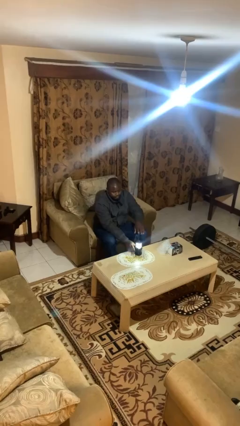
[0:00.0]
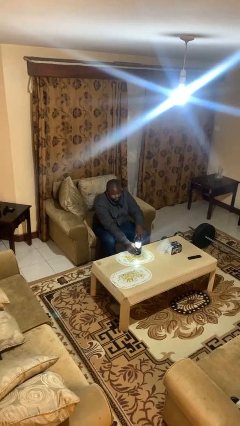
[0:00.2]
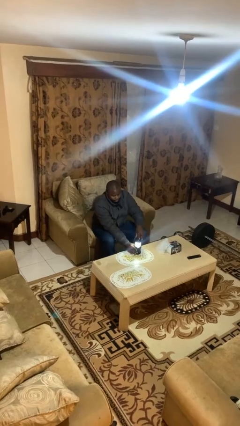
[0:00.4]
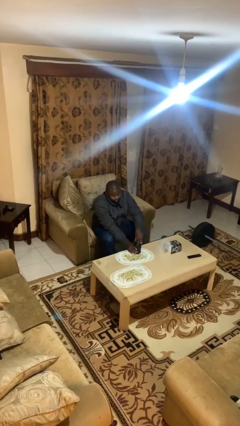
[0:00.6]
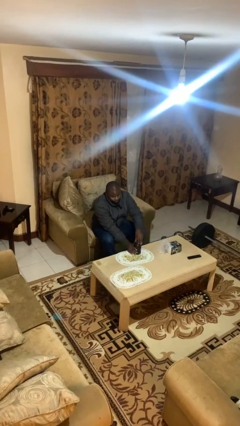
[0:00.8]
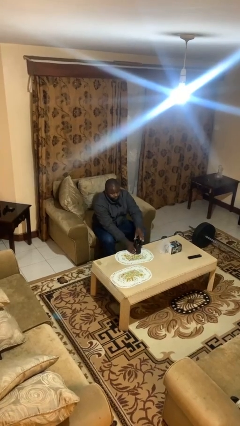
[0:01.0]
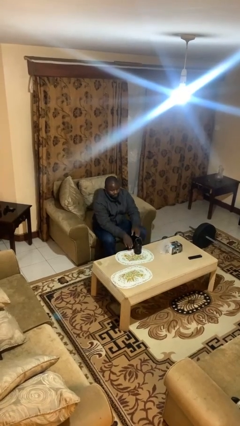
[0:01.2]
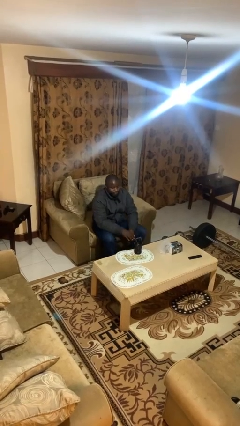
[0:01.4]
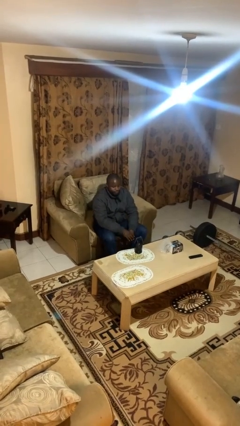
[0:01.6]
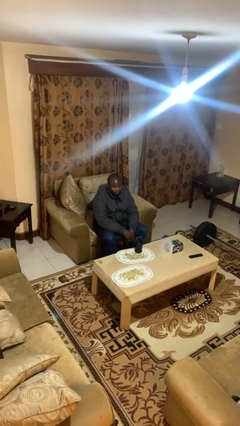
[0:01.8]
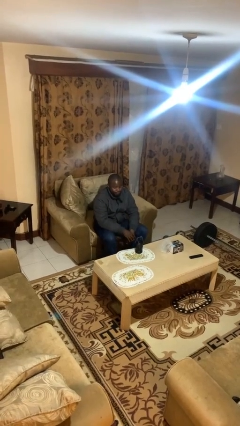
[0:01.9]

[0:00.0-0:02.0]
person turns off lamp

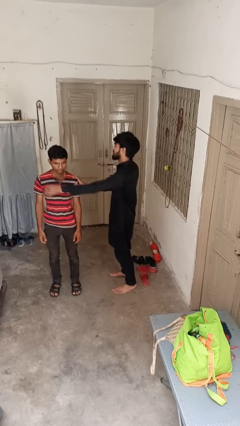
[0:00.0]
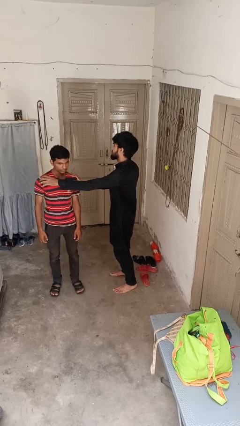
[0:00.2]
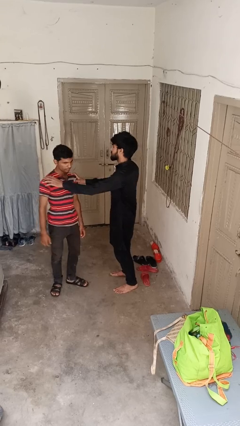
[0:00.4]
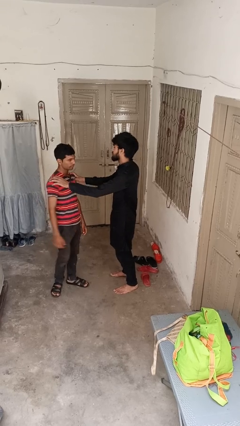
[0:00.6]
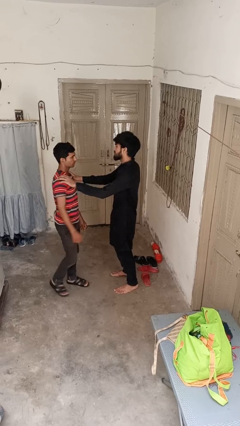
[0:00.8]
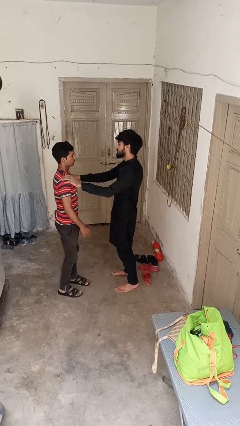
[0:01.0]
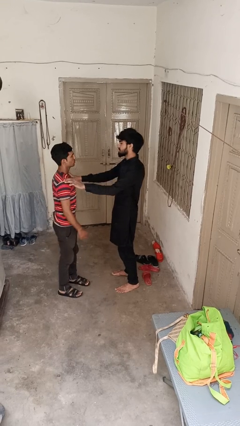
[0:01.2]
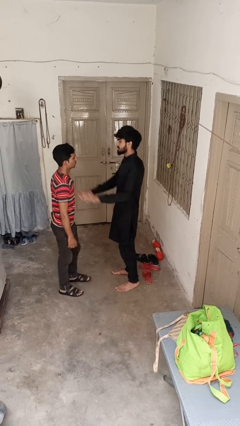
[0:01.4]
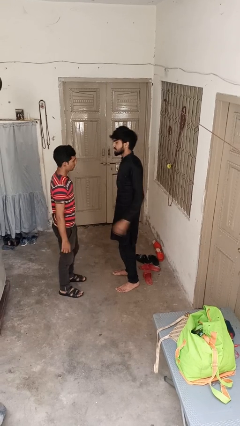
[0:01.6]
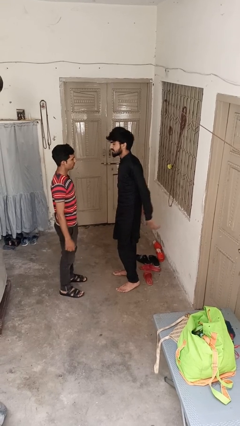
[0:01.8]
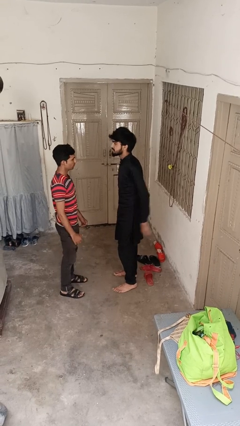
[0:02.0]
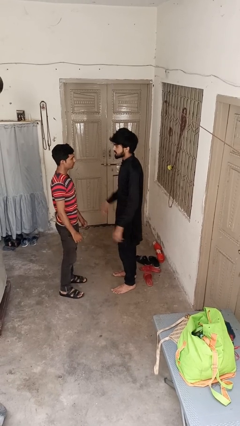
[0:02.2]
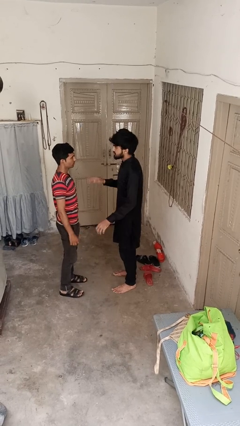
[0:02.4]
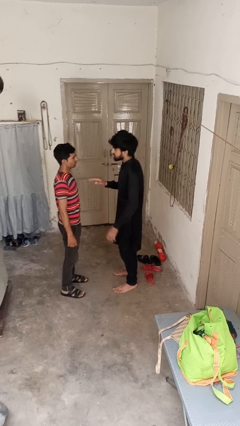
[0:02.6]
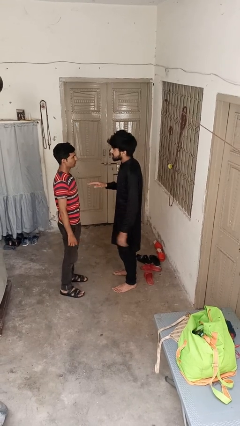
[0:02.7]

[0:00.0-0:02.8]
person spins person around

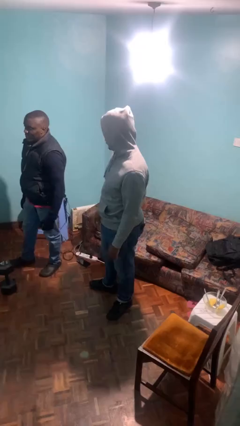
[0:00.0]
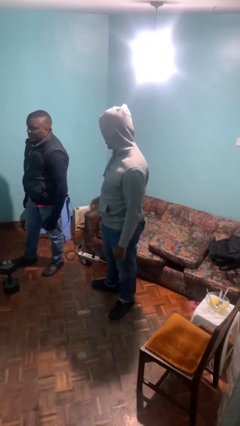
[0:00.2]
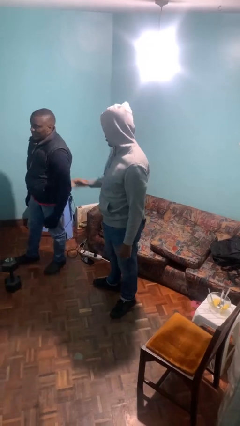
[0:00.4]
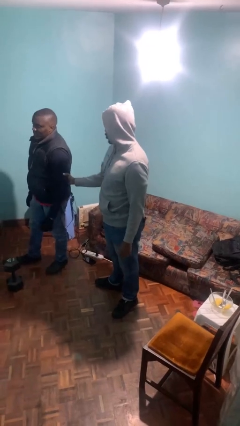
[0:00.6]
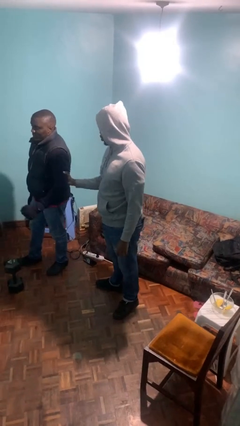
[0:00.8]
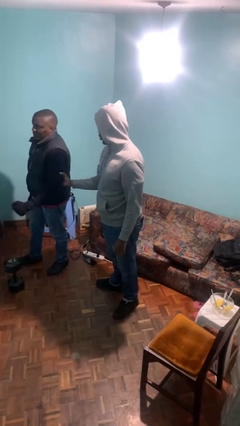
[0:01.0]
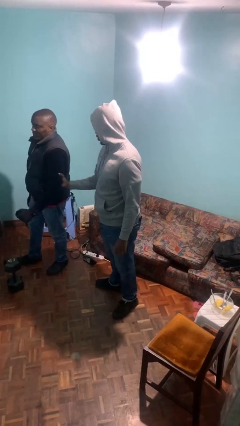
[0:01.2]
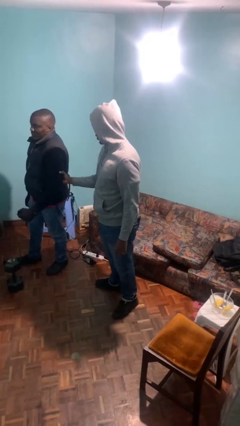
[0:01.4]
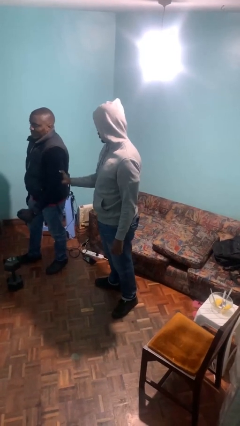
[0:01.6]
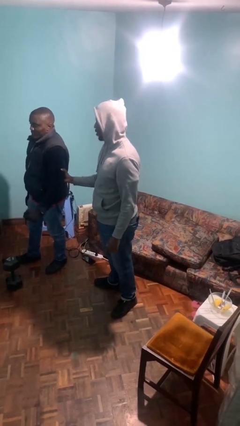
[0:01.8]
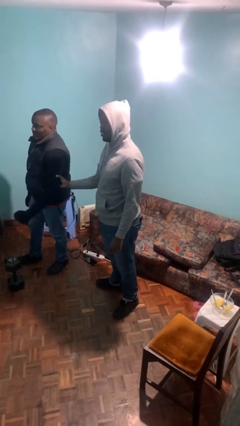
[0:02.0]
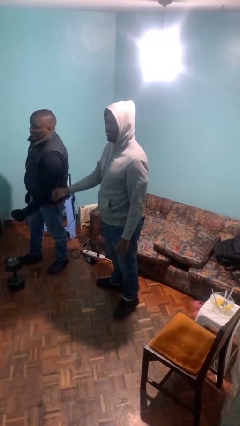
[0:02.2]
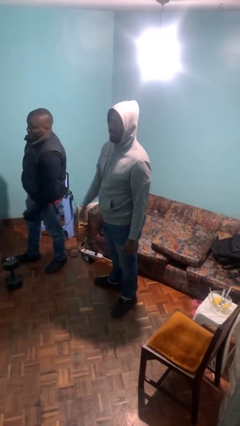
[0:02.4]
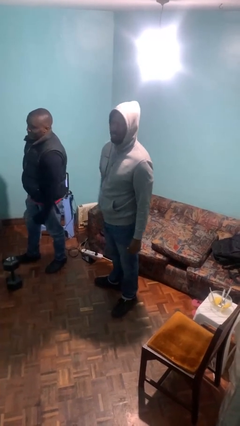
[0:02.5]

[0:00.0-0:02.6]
person grabs person by bicep

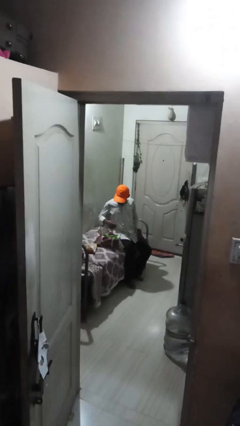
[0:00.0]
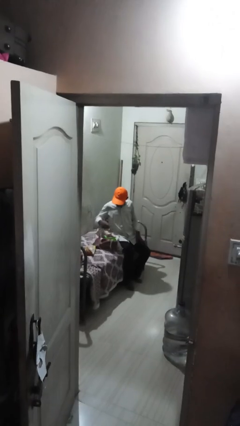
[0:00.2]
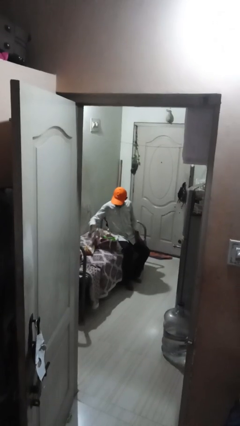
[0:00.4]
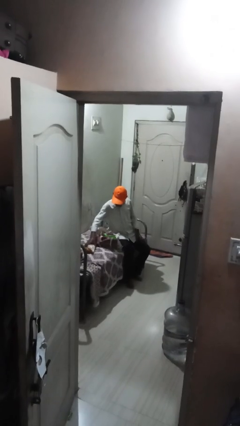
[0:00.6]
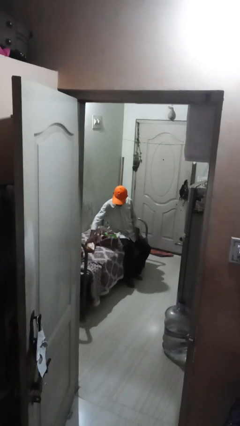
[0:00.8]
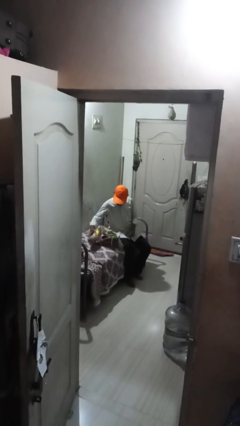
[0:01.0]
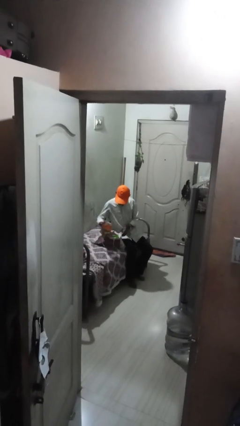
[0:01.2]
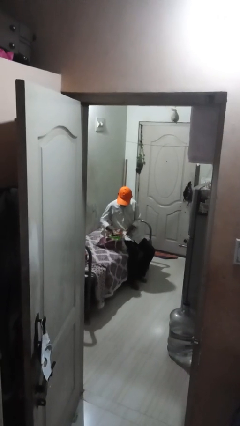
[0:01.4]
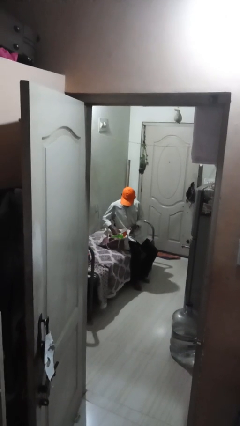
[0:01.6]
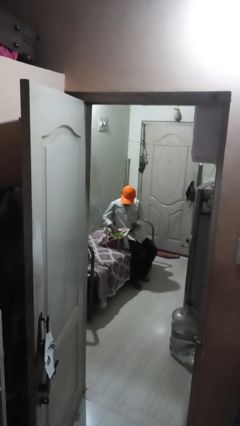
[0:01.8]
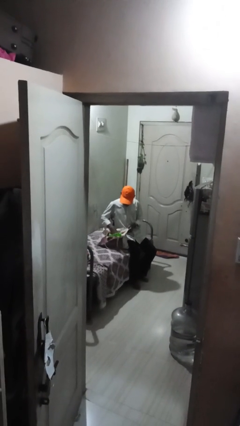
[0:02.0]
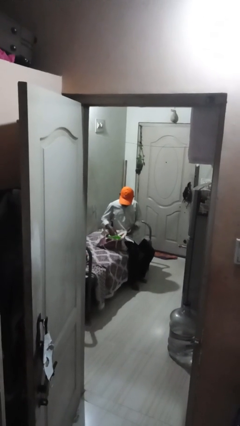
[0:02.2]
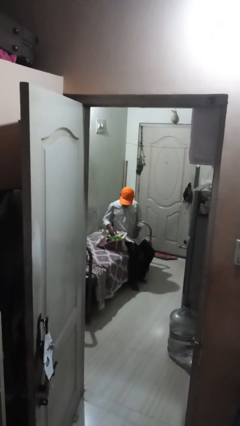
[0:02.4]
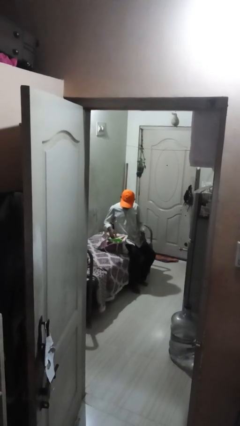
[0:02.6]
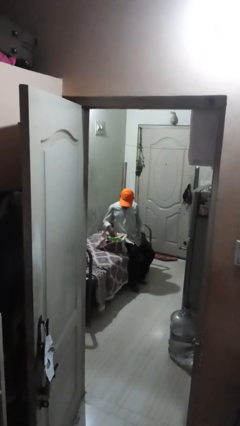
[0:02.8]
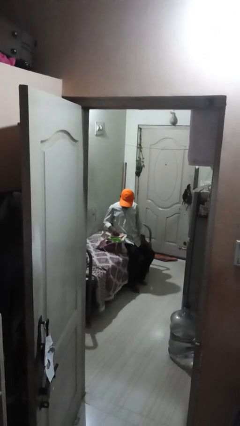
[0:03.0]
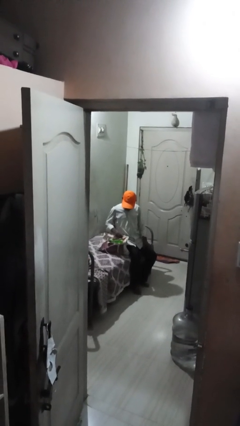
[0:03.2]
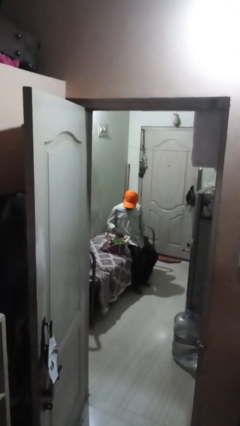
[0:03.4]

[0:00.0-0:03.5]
person puts object into bag

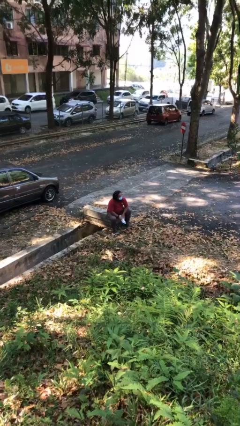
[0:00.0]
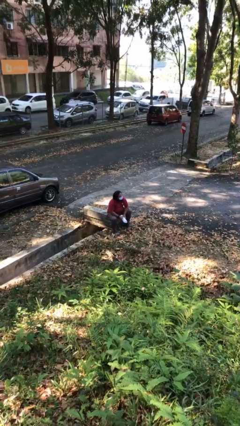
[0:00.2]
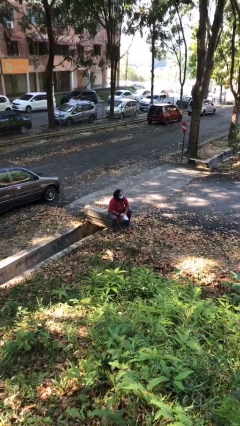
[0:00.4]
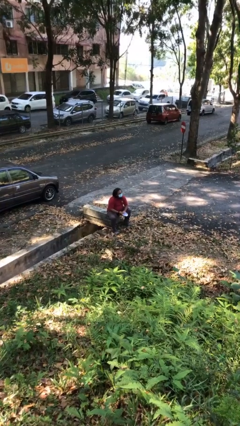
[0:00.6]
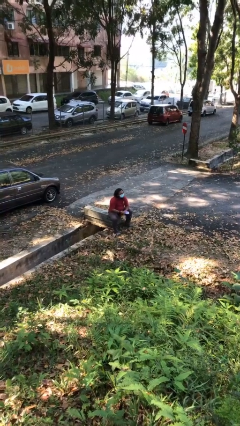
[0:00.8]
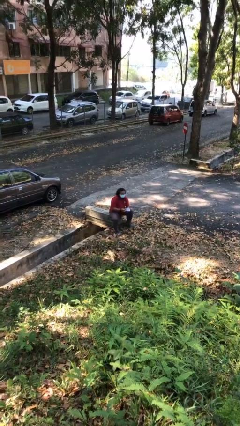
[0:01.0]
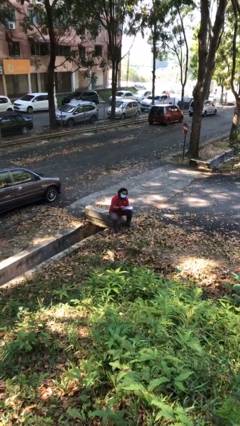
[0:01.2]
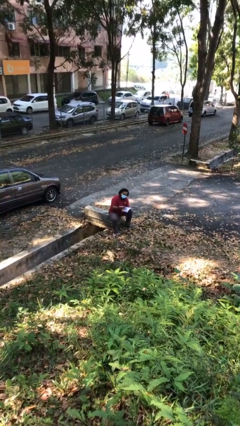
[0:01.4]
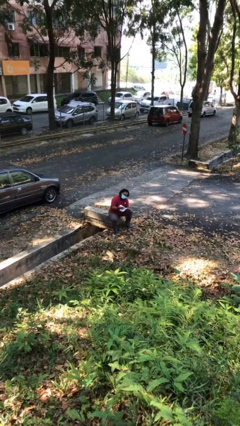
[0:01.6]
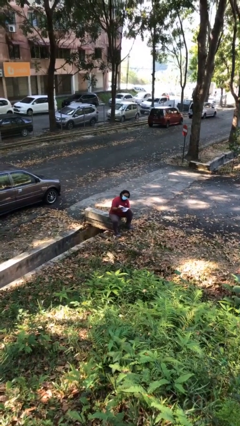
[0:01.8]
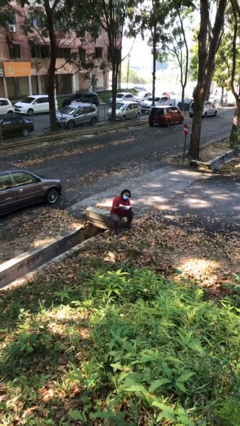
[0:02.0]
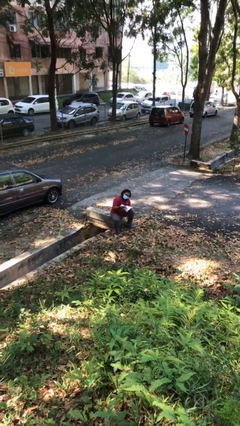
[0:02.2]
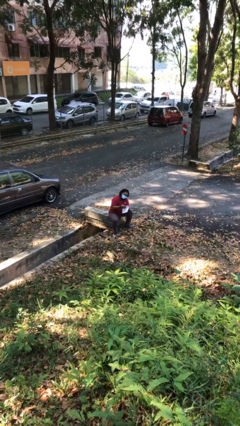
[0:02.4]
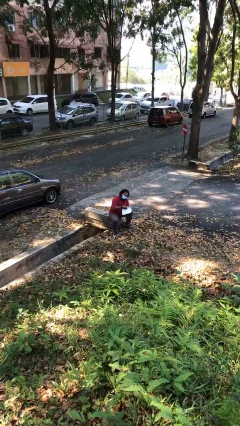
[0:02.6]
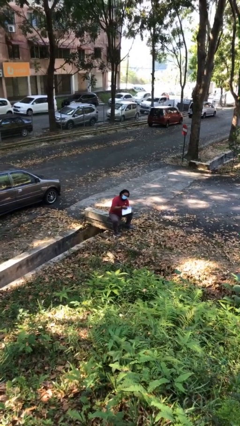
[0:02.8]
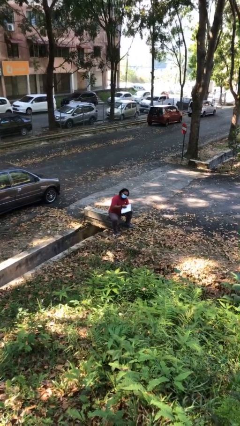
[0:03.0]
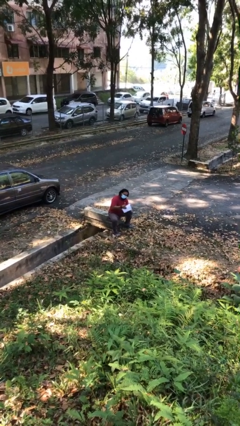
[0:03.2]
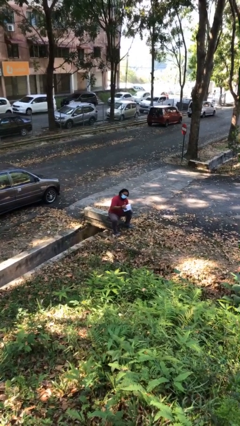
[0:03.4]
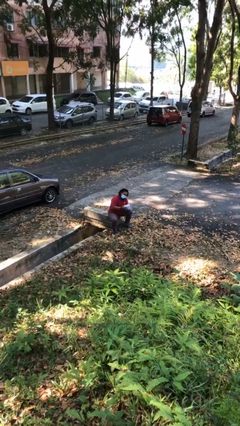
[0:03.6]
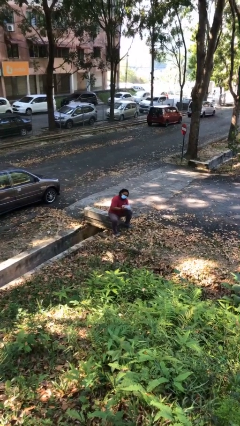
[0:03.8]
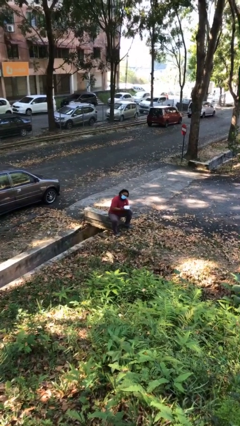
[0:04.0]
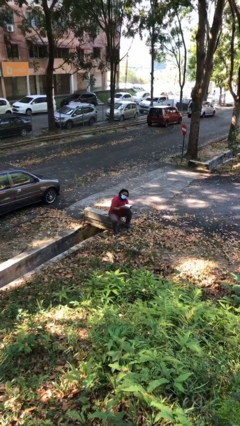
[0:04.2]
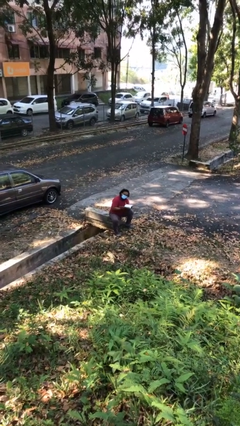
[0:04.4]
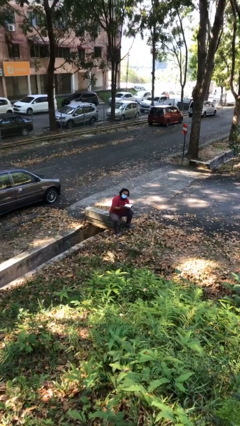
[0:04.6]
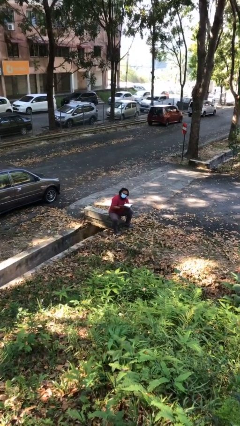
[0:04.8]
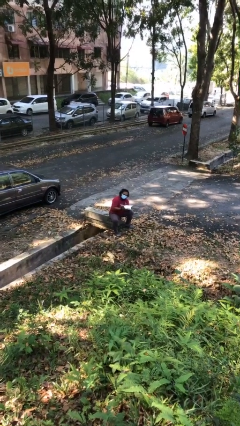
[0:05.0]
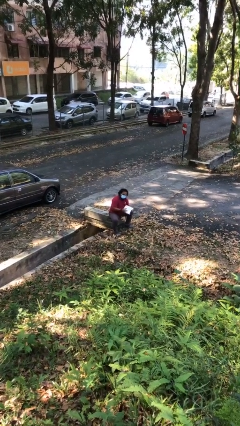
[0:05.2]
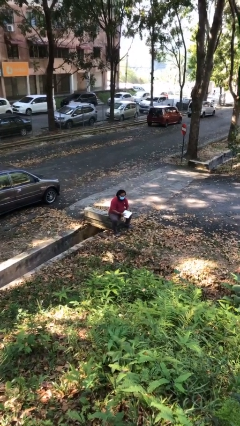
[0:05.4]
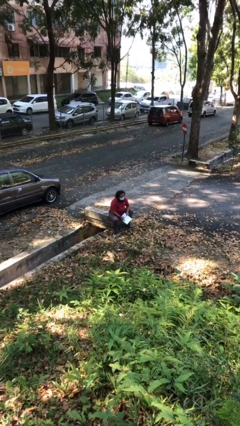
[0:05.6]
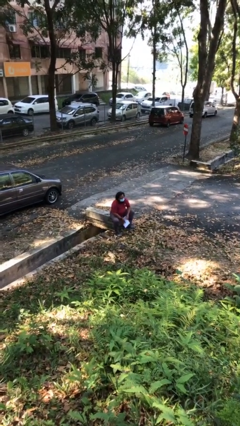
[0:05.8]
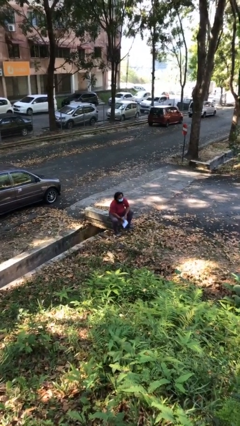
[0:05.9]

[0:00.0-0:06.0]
person reads document

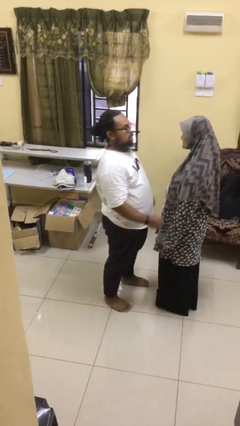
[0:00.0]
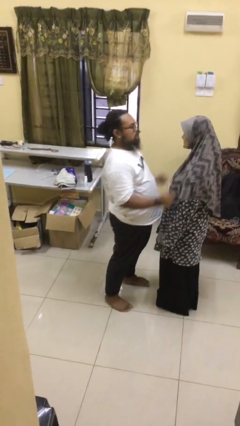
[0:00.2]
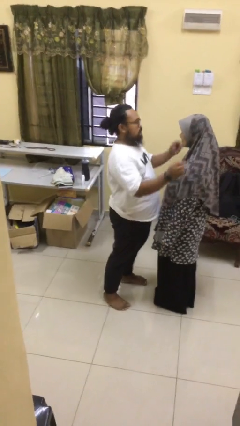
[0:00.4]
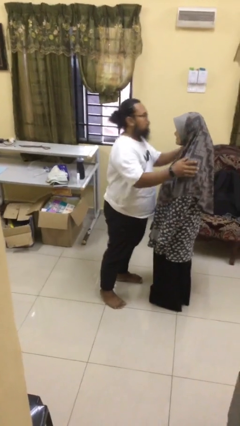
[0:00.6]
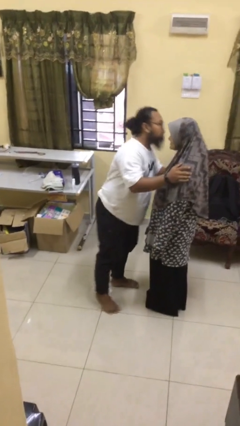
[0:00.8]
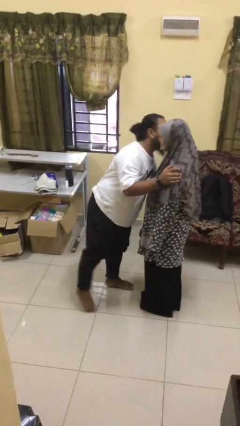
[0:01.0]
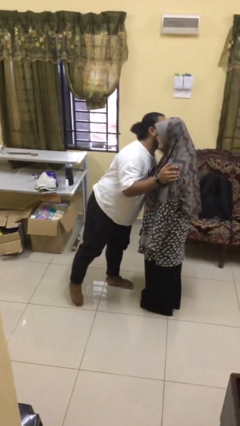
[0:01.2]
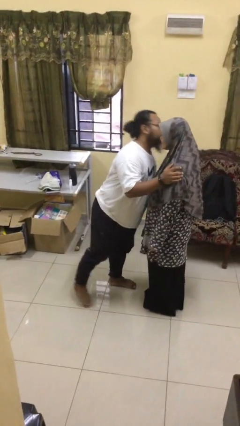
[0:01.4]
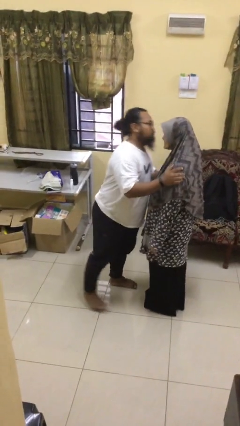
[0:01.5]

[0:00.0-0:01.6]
person kisses cheek of person
